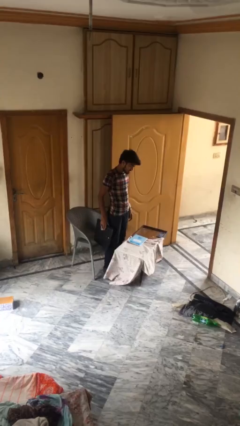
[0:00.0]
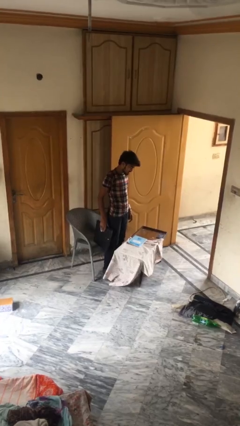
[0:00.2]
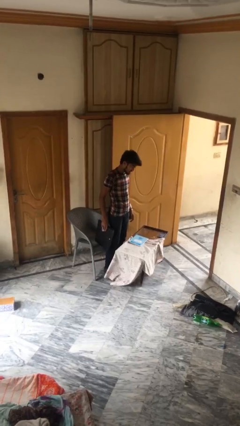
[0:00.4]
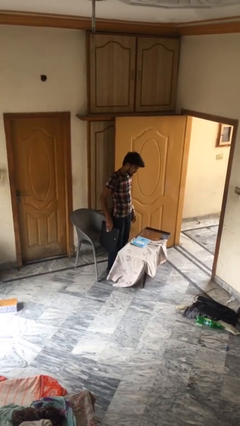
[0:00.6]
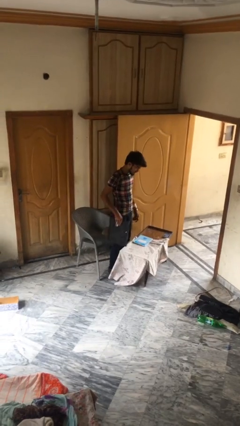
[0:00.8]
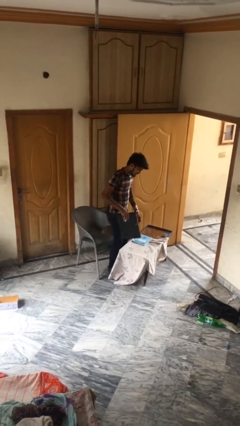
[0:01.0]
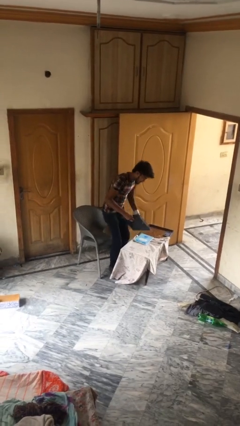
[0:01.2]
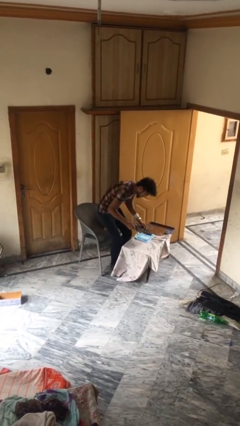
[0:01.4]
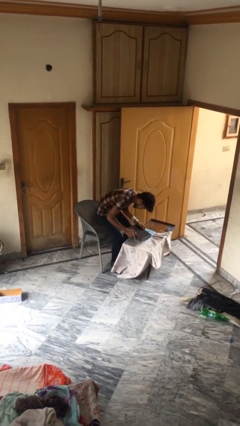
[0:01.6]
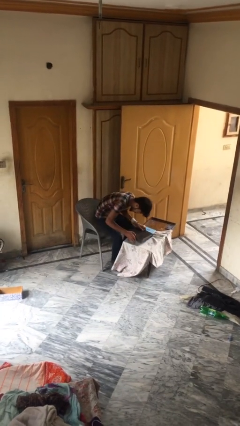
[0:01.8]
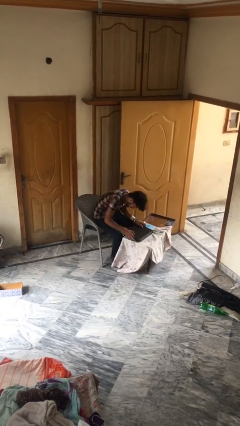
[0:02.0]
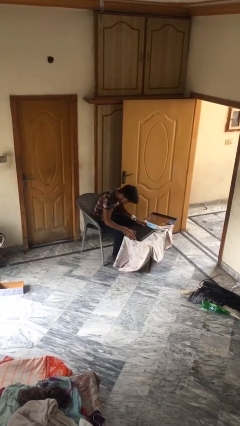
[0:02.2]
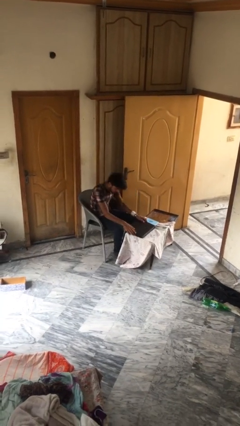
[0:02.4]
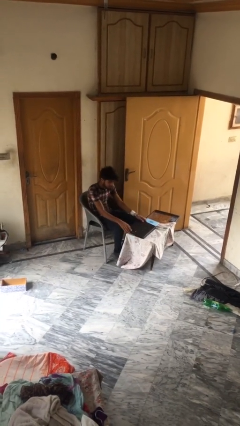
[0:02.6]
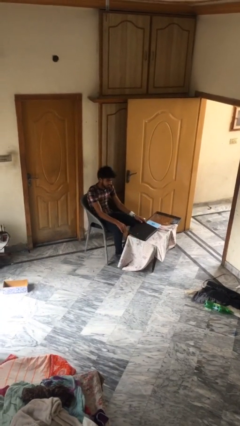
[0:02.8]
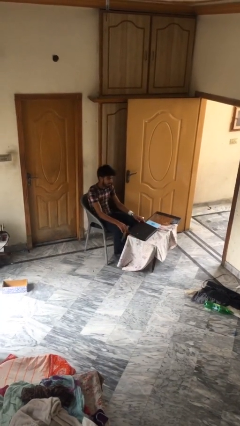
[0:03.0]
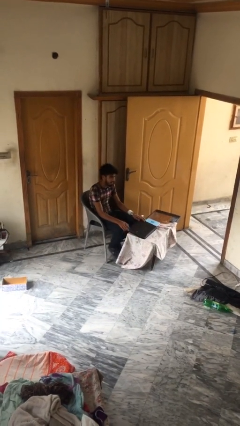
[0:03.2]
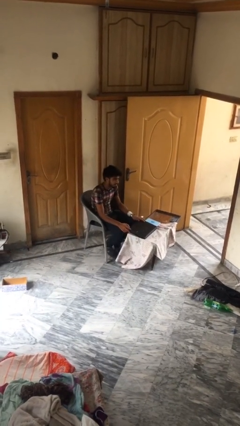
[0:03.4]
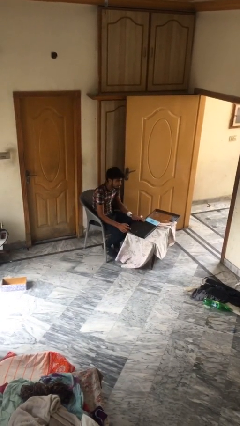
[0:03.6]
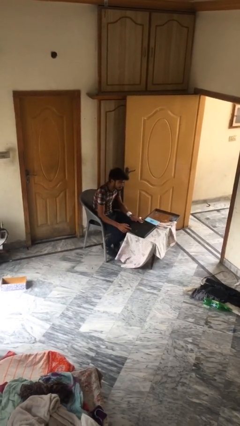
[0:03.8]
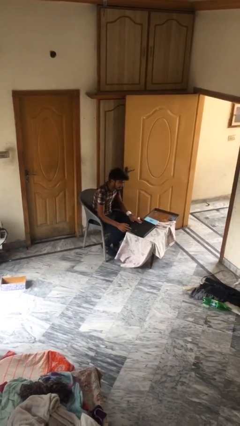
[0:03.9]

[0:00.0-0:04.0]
person sits down

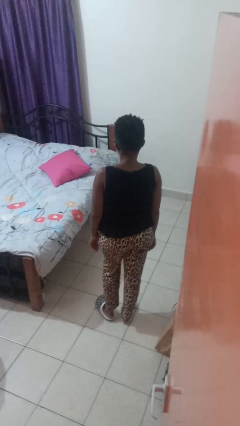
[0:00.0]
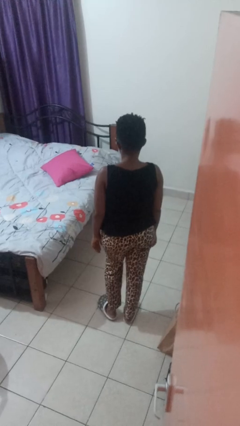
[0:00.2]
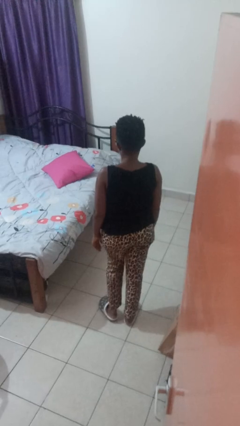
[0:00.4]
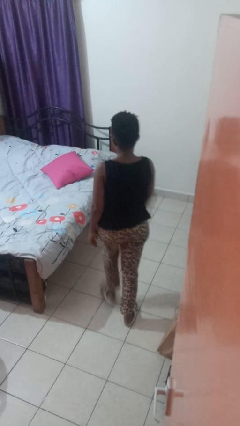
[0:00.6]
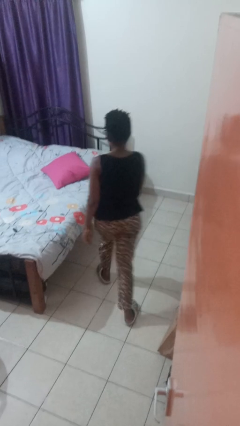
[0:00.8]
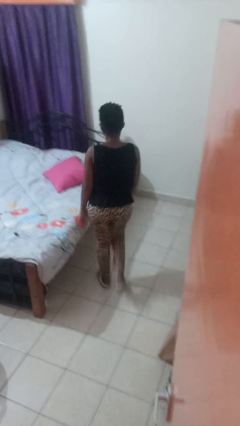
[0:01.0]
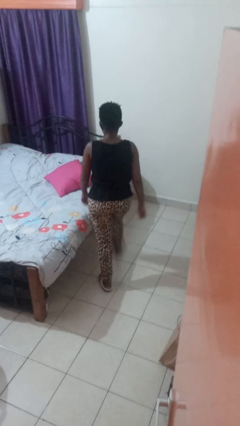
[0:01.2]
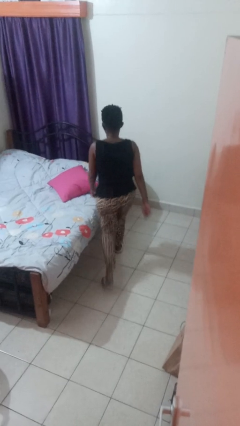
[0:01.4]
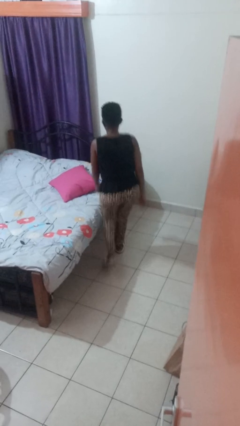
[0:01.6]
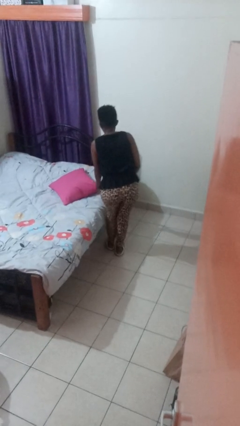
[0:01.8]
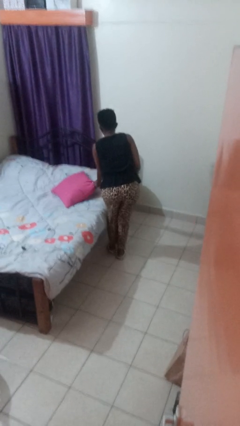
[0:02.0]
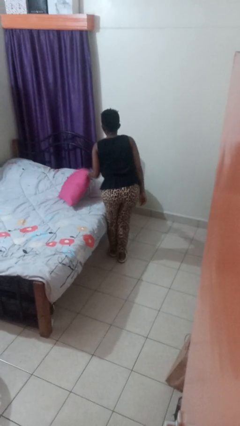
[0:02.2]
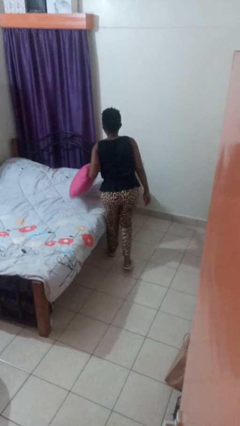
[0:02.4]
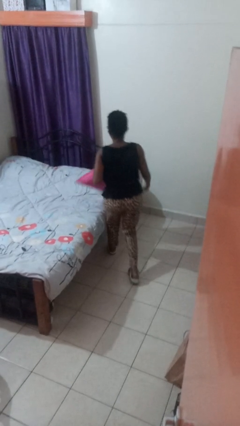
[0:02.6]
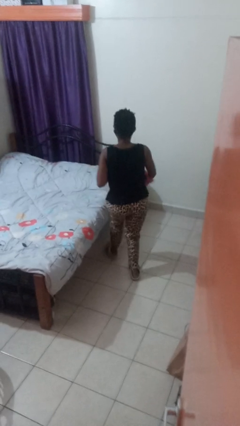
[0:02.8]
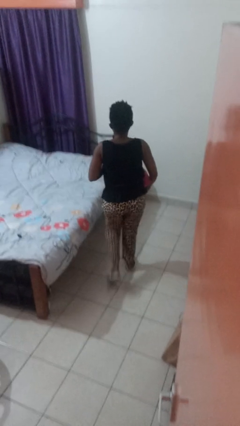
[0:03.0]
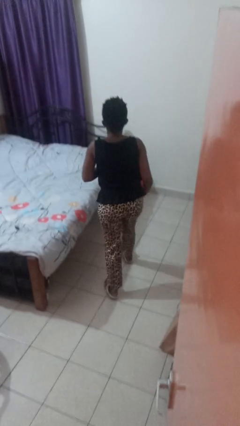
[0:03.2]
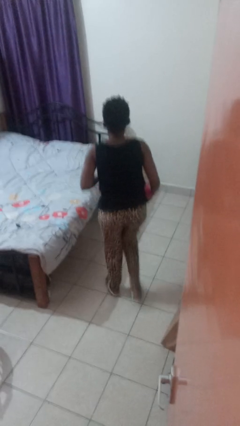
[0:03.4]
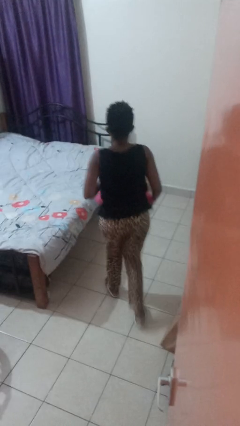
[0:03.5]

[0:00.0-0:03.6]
person picks up object from bed

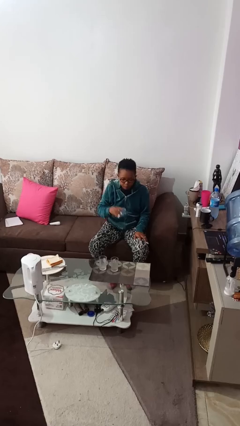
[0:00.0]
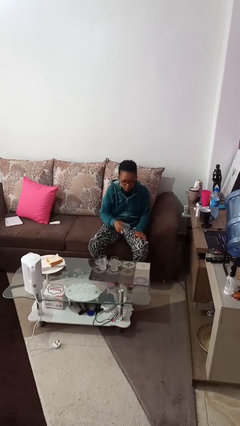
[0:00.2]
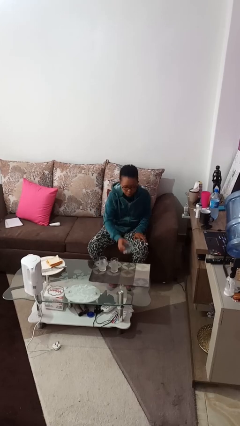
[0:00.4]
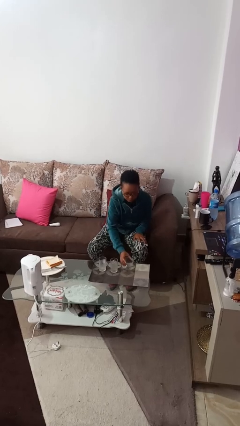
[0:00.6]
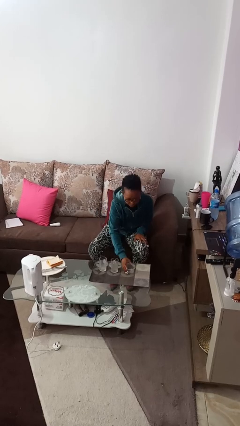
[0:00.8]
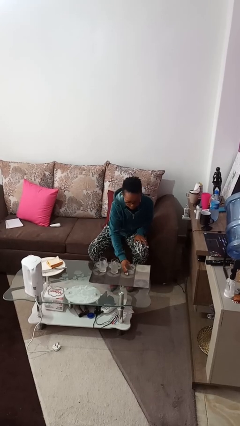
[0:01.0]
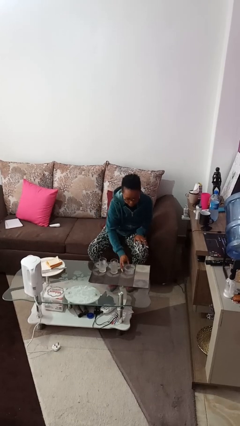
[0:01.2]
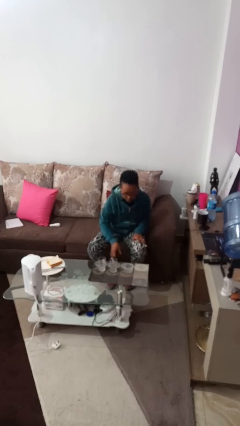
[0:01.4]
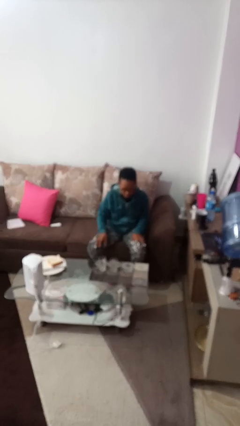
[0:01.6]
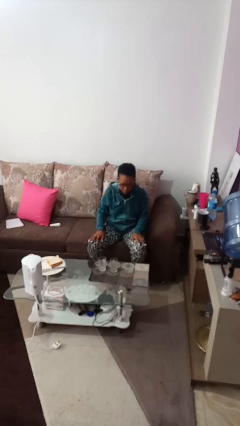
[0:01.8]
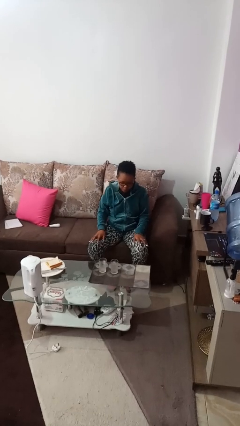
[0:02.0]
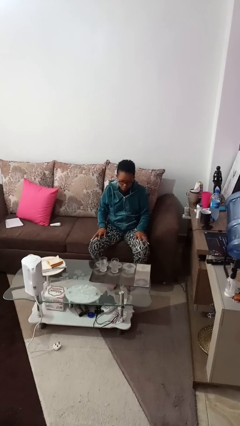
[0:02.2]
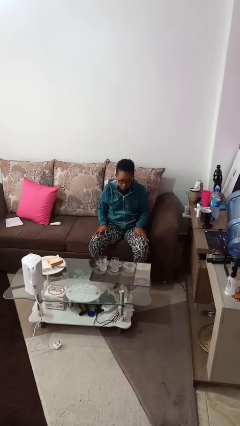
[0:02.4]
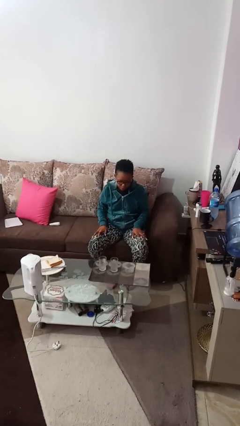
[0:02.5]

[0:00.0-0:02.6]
person puts down object on table

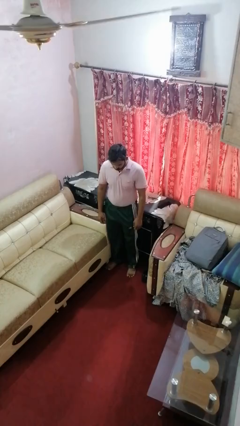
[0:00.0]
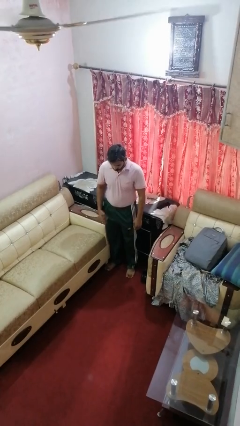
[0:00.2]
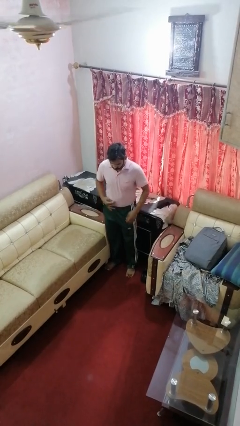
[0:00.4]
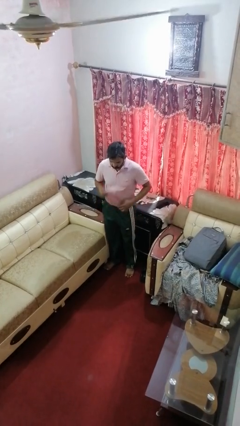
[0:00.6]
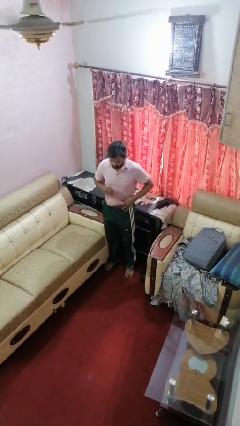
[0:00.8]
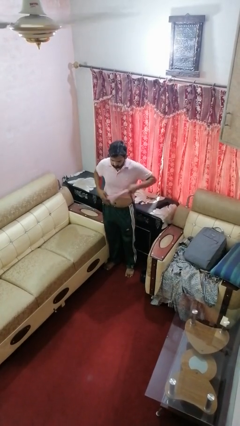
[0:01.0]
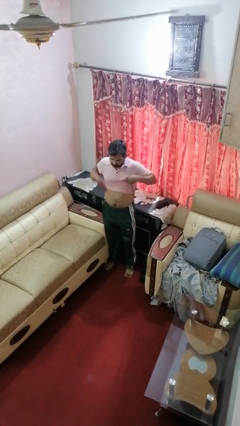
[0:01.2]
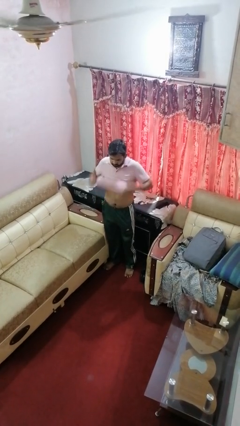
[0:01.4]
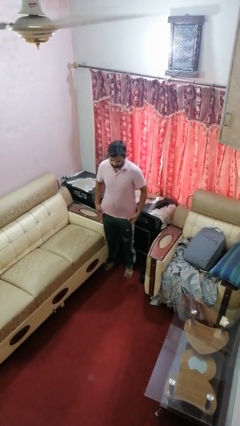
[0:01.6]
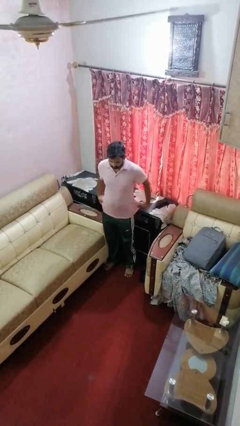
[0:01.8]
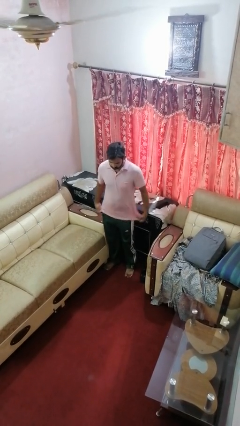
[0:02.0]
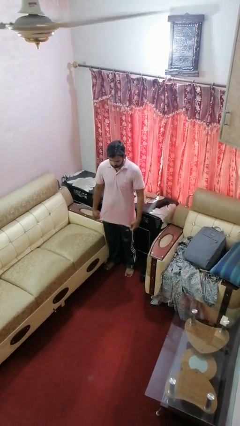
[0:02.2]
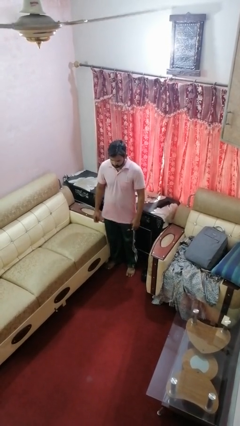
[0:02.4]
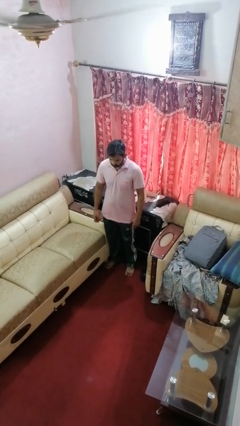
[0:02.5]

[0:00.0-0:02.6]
person untucks shirt

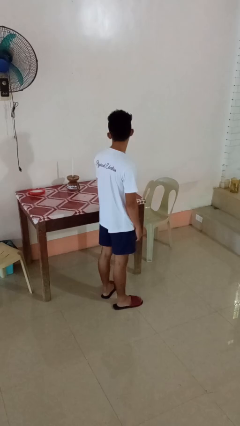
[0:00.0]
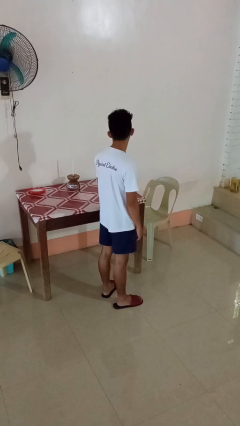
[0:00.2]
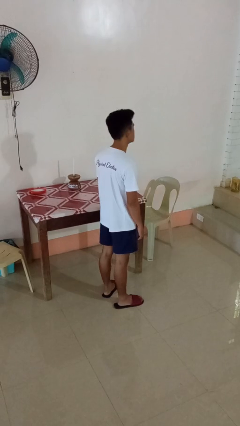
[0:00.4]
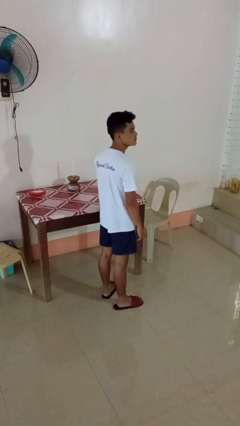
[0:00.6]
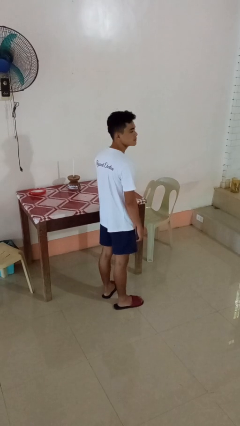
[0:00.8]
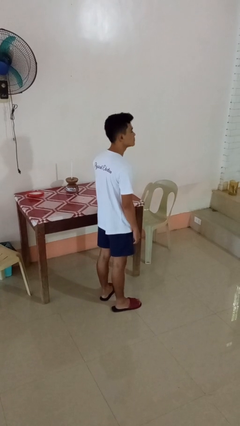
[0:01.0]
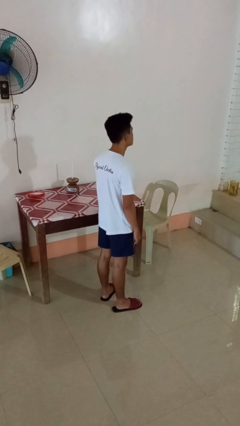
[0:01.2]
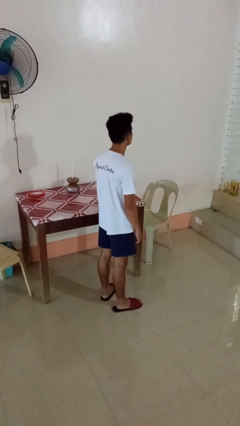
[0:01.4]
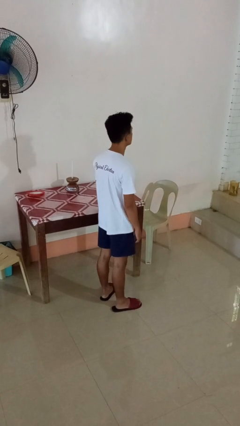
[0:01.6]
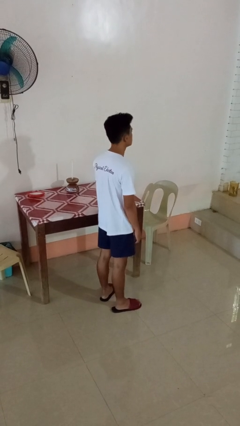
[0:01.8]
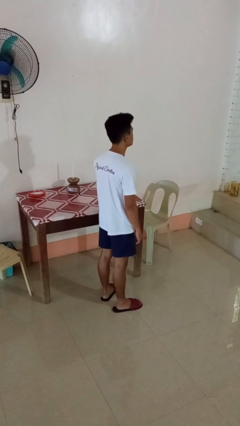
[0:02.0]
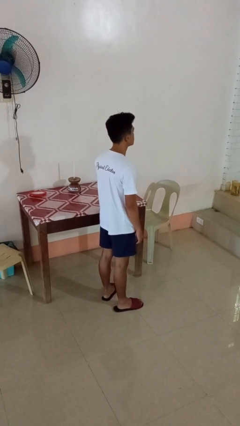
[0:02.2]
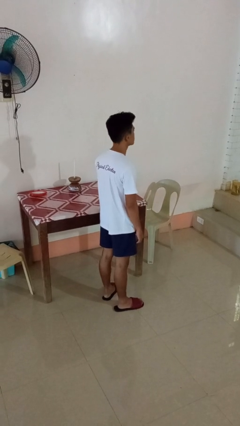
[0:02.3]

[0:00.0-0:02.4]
person shakes head

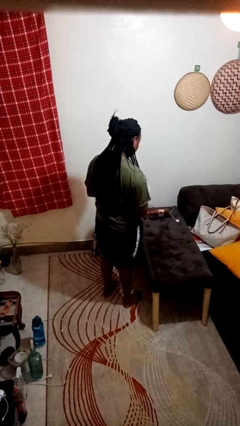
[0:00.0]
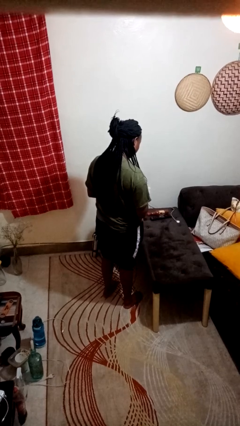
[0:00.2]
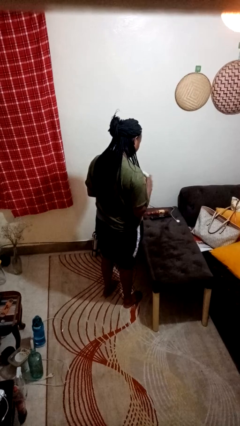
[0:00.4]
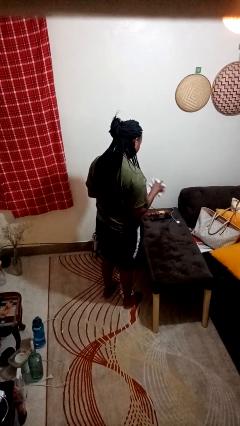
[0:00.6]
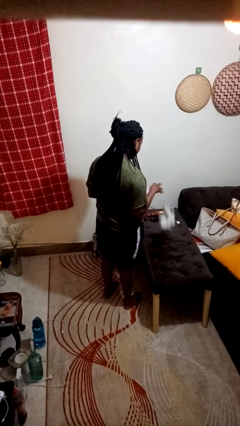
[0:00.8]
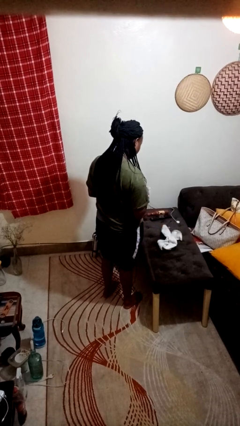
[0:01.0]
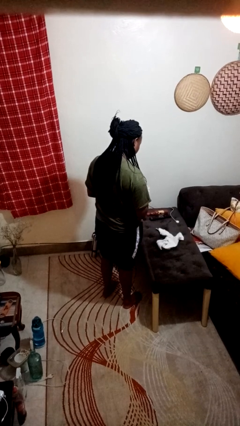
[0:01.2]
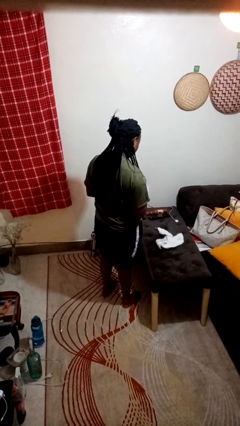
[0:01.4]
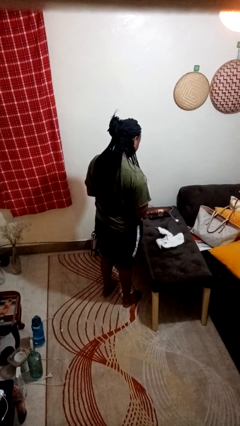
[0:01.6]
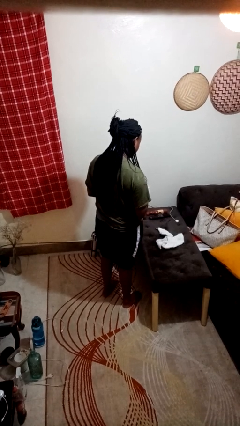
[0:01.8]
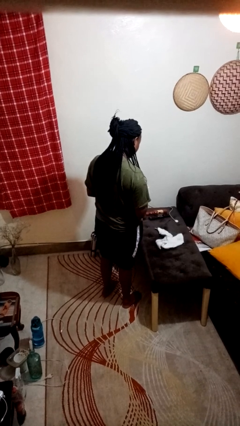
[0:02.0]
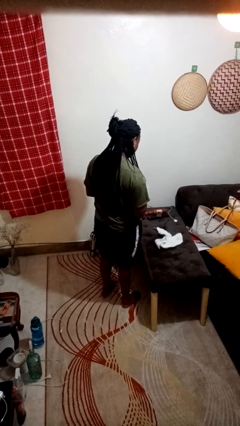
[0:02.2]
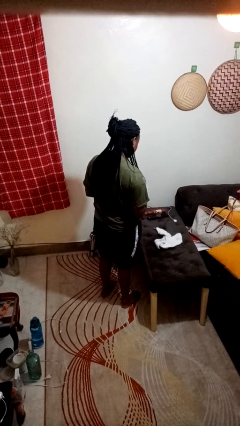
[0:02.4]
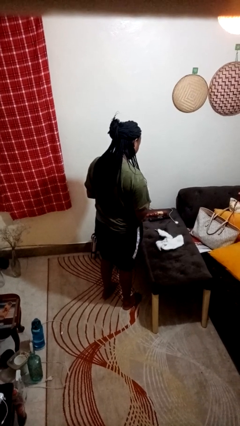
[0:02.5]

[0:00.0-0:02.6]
person throws object on table
